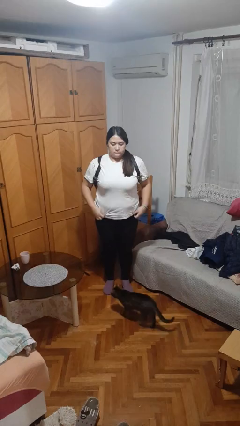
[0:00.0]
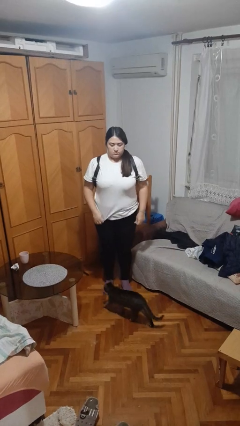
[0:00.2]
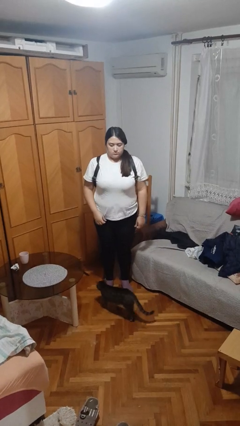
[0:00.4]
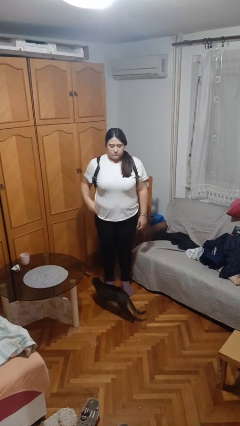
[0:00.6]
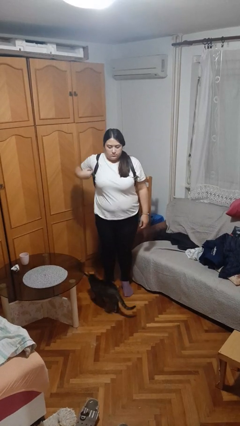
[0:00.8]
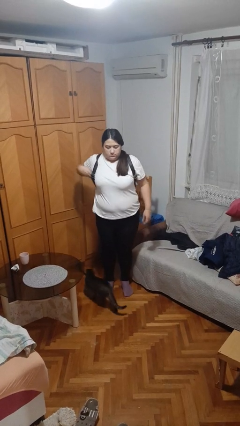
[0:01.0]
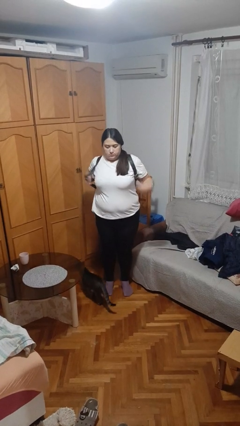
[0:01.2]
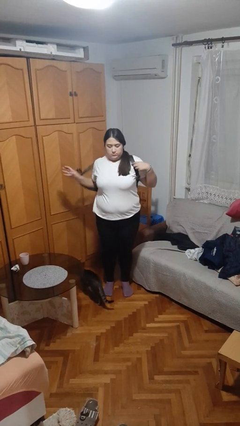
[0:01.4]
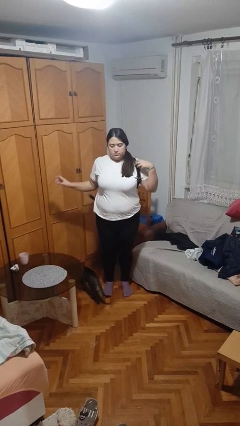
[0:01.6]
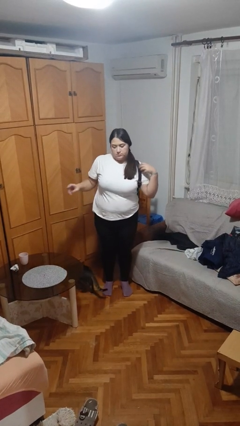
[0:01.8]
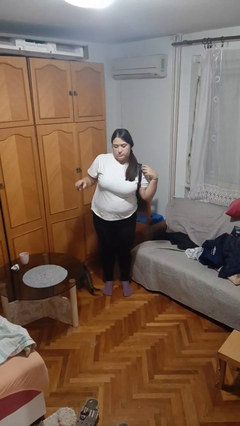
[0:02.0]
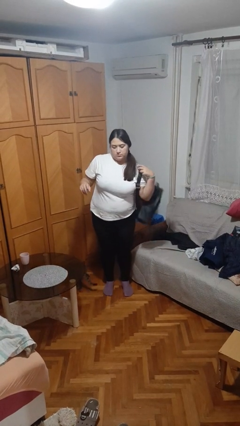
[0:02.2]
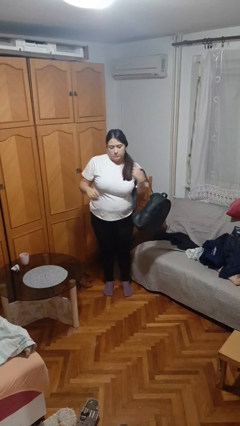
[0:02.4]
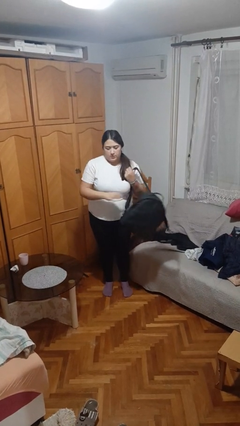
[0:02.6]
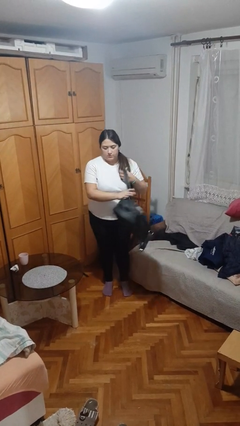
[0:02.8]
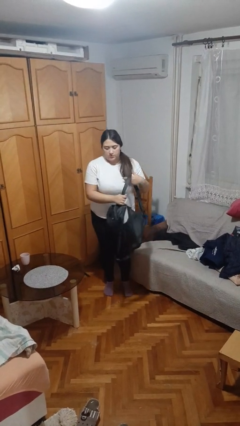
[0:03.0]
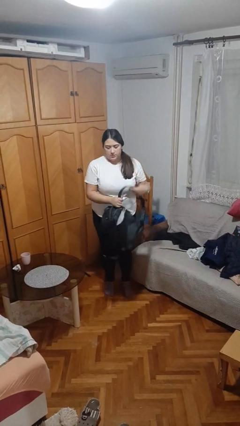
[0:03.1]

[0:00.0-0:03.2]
person takes off backpack

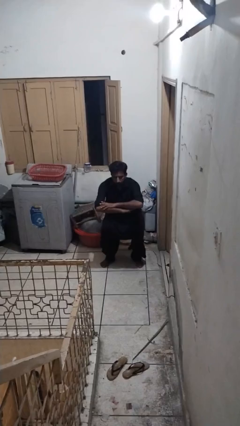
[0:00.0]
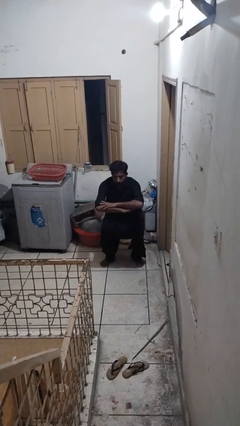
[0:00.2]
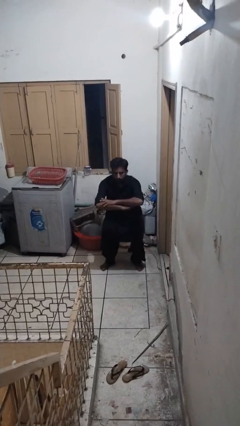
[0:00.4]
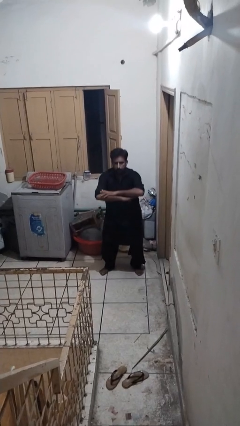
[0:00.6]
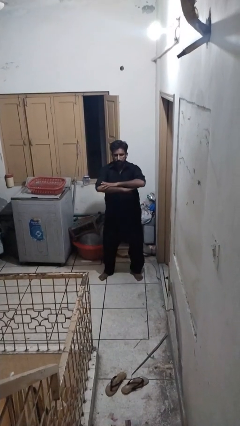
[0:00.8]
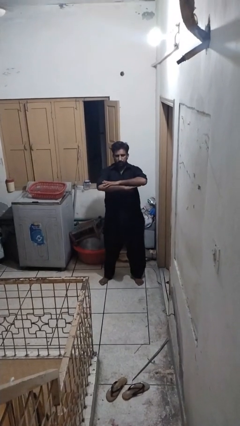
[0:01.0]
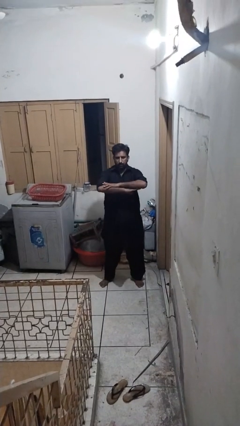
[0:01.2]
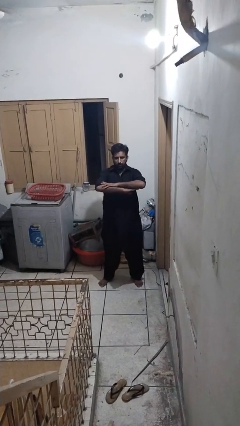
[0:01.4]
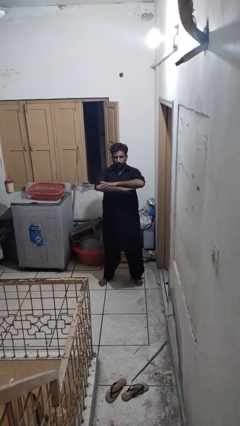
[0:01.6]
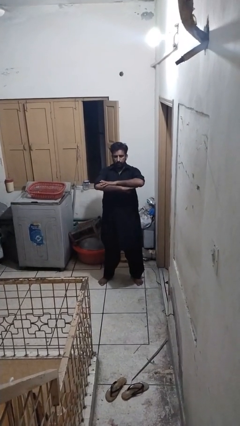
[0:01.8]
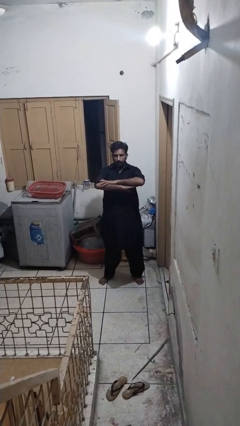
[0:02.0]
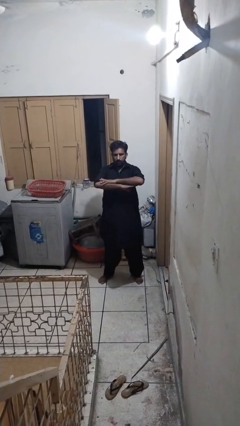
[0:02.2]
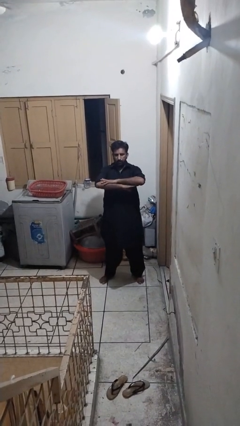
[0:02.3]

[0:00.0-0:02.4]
person stands up

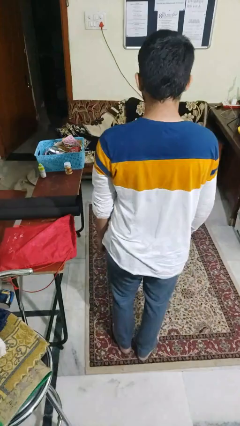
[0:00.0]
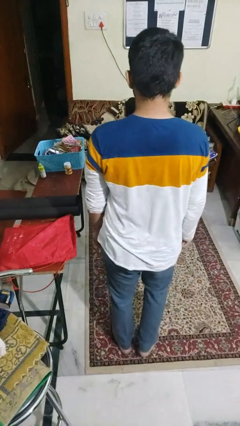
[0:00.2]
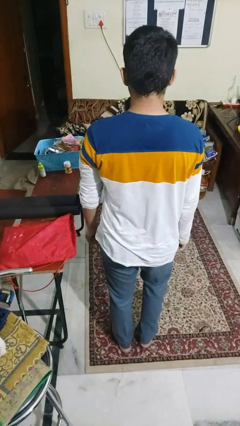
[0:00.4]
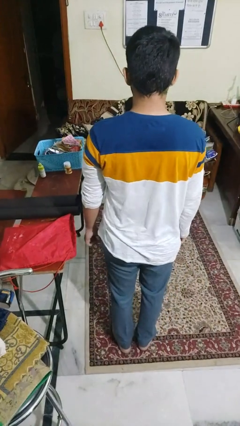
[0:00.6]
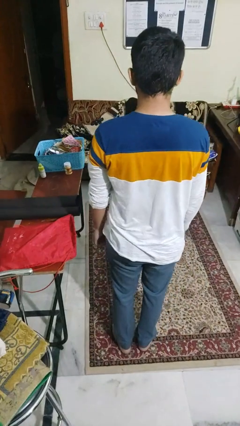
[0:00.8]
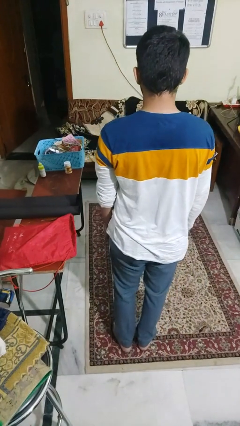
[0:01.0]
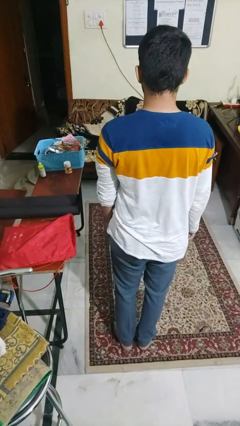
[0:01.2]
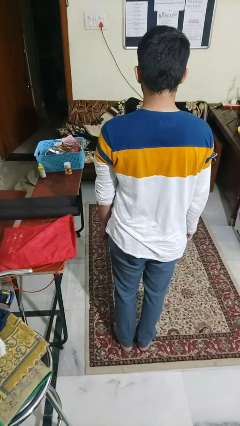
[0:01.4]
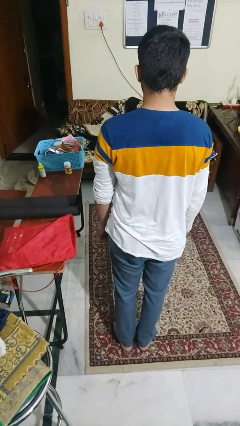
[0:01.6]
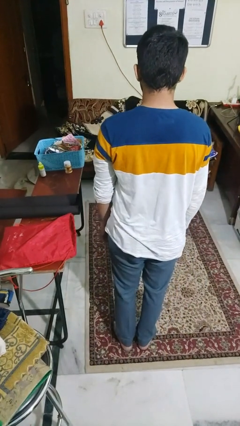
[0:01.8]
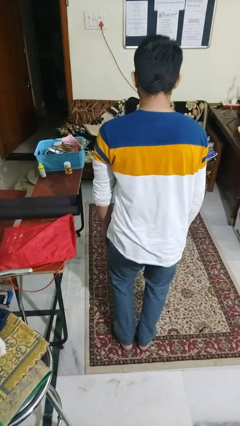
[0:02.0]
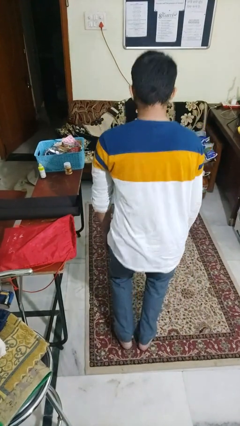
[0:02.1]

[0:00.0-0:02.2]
person stands up from floor

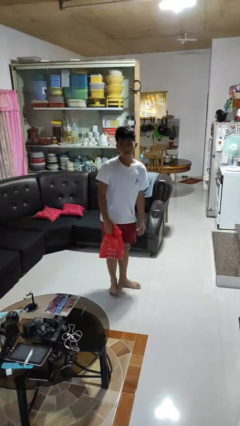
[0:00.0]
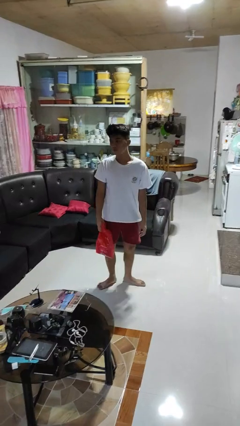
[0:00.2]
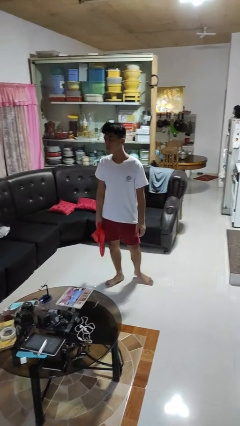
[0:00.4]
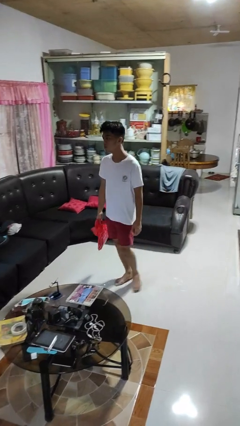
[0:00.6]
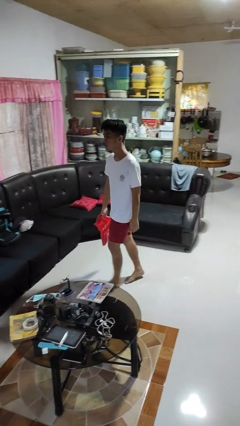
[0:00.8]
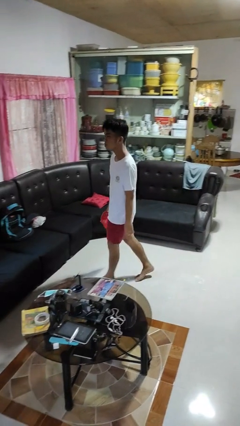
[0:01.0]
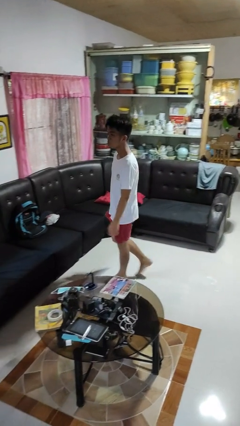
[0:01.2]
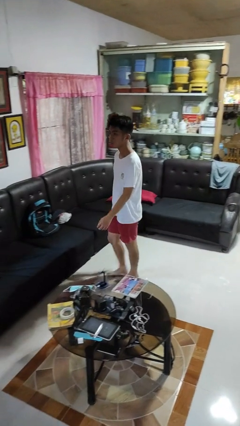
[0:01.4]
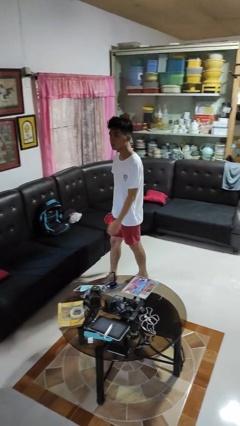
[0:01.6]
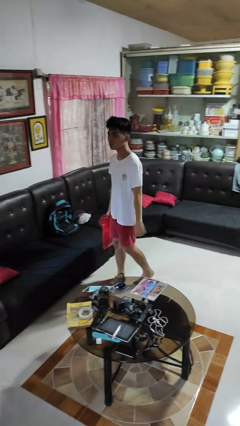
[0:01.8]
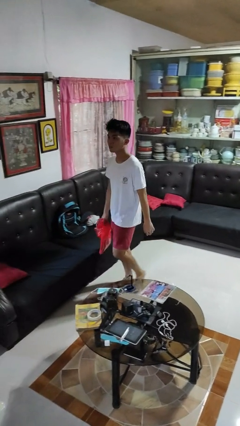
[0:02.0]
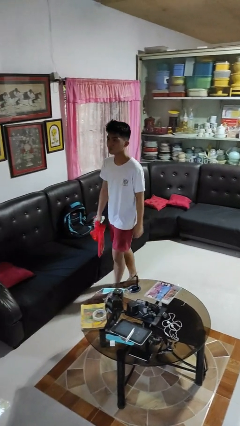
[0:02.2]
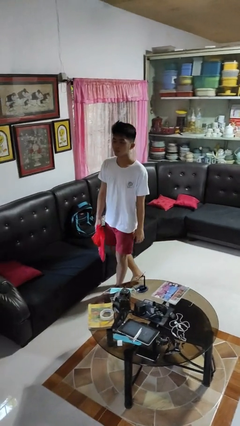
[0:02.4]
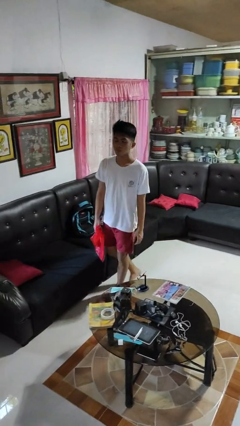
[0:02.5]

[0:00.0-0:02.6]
person carries groceries

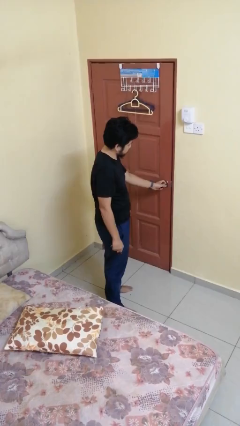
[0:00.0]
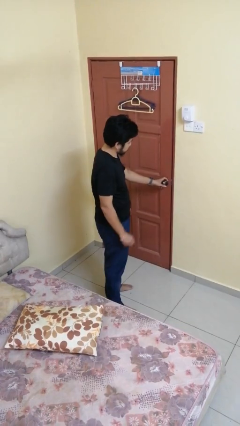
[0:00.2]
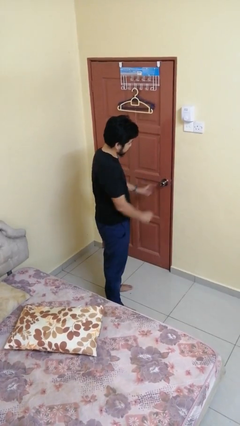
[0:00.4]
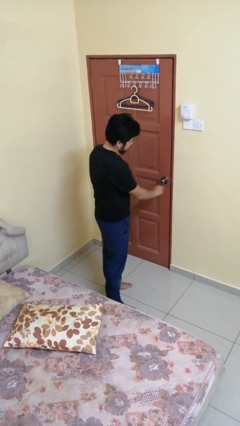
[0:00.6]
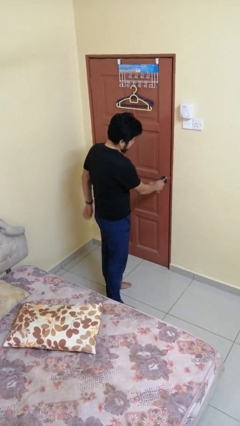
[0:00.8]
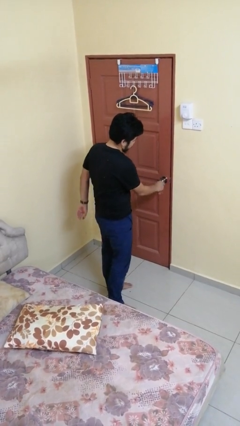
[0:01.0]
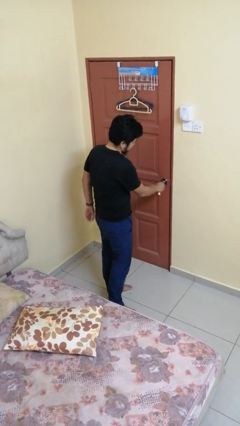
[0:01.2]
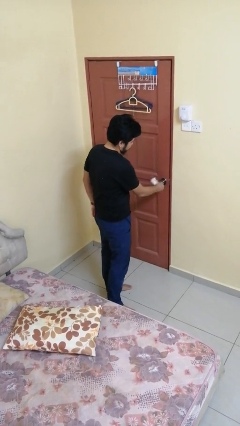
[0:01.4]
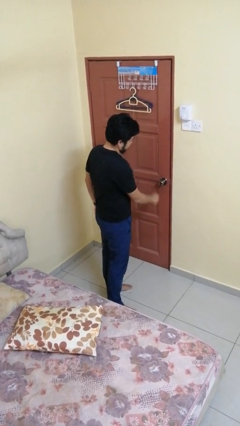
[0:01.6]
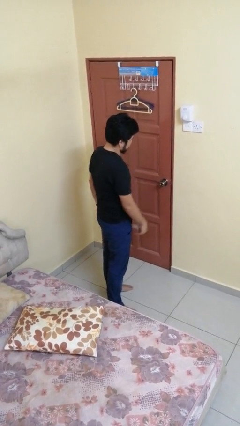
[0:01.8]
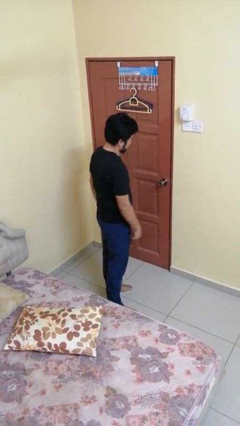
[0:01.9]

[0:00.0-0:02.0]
person locks door with keys

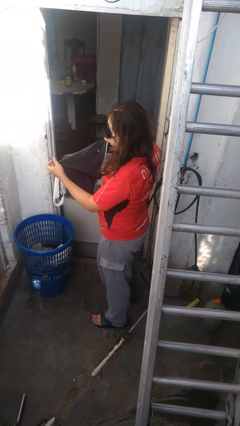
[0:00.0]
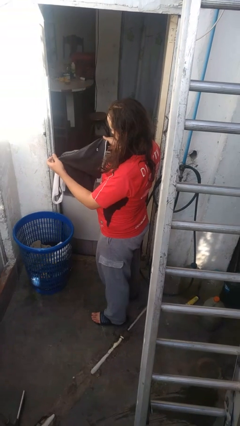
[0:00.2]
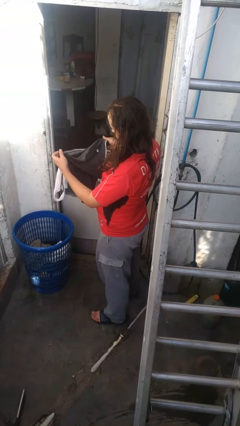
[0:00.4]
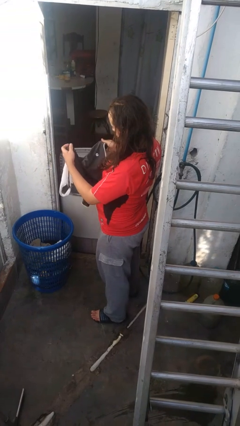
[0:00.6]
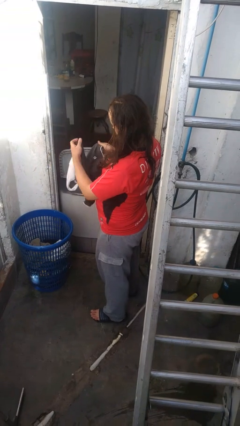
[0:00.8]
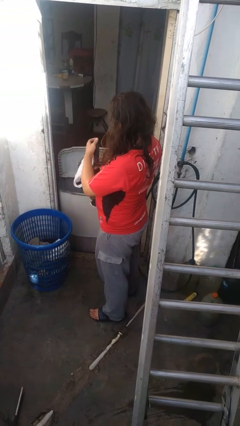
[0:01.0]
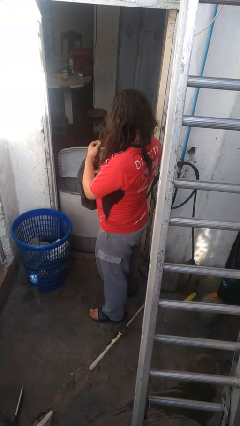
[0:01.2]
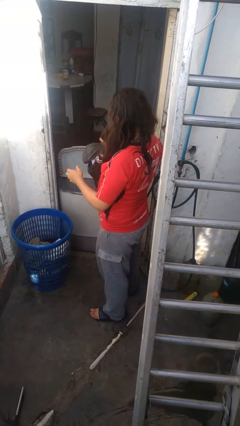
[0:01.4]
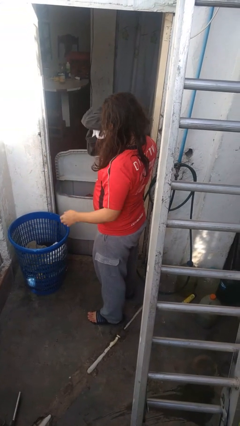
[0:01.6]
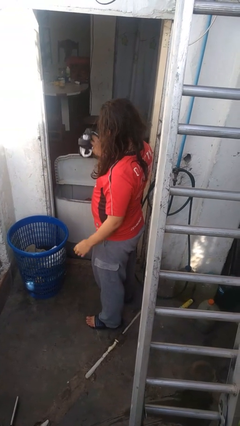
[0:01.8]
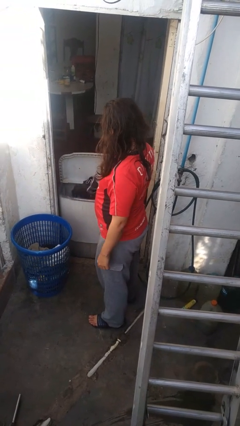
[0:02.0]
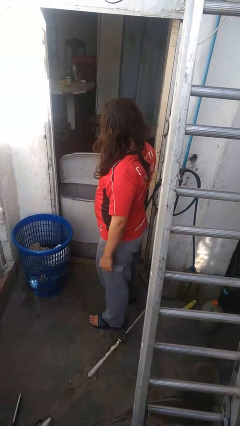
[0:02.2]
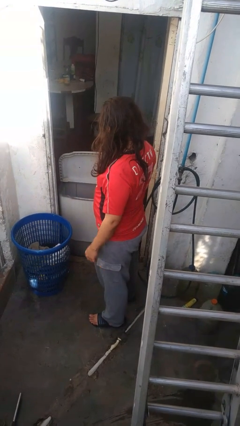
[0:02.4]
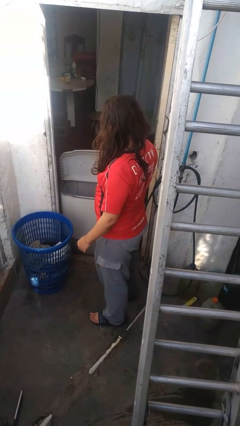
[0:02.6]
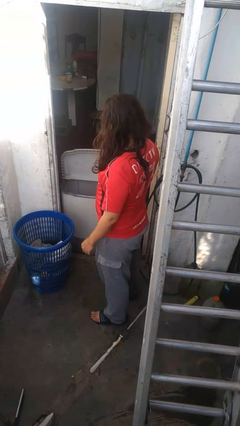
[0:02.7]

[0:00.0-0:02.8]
person loads clotheswasher

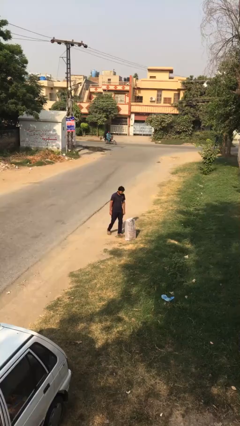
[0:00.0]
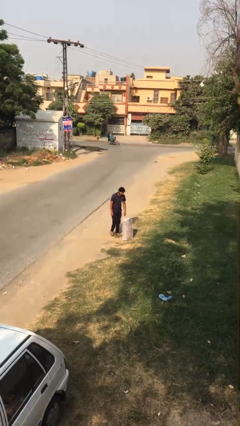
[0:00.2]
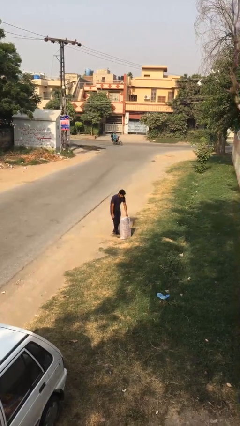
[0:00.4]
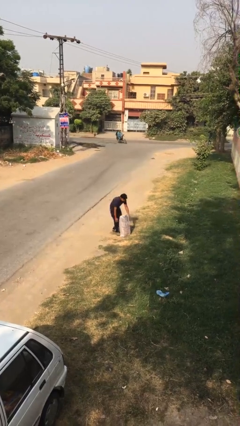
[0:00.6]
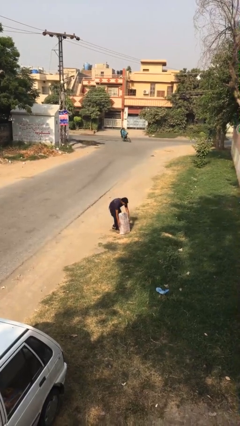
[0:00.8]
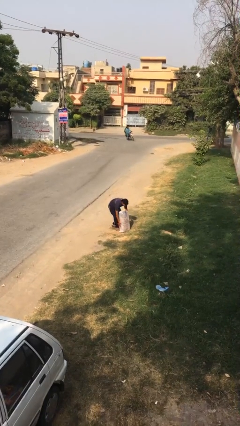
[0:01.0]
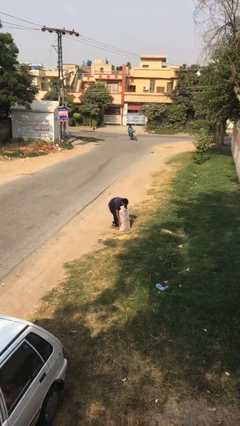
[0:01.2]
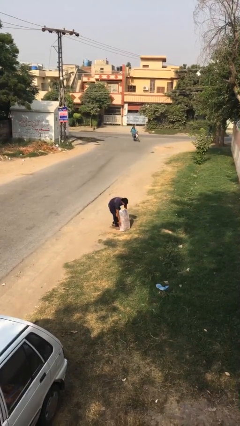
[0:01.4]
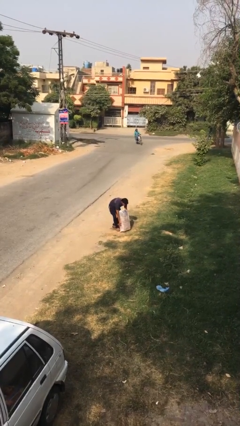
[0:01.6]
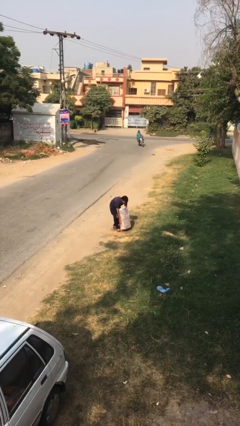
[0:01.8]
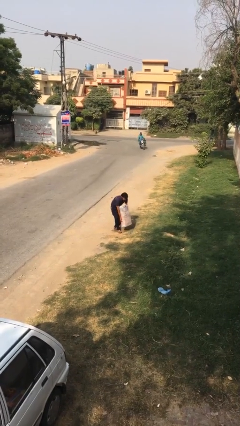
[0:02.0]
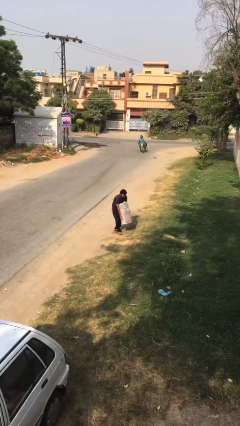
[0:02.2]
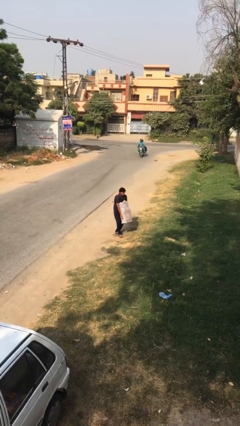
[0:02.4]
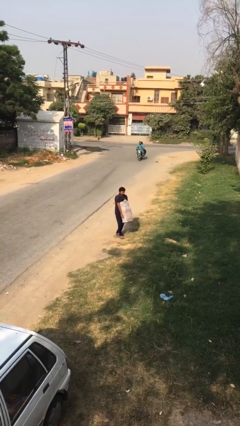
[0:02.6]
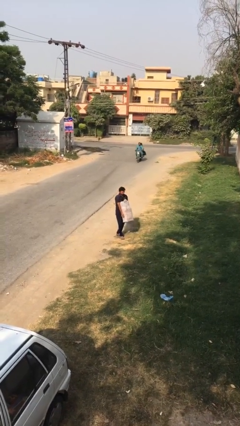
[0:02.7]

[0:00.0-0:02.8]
person picks up object from floor
